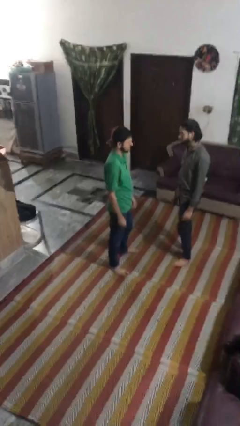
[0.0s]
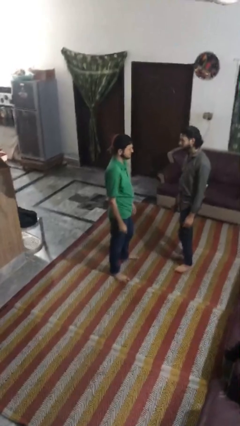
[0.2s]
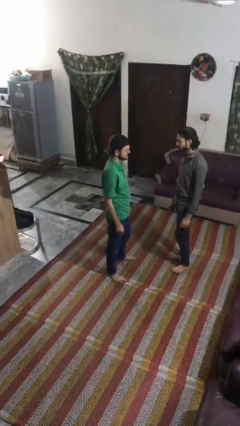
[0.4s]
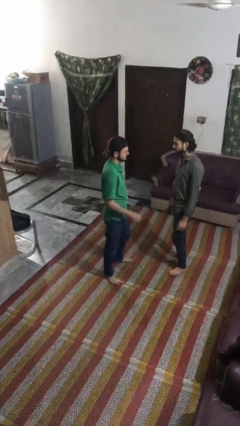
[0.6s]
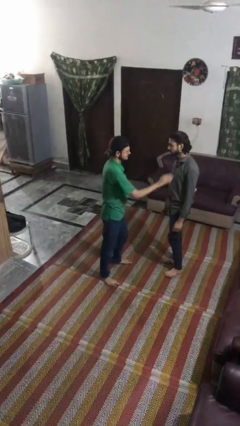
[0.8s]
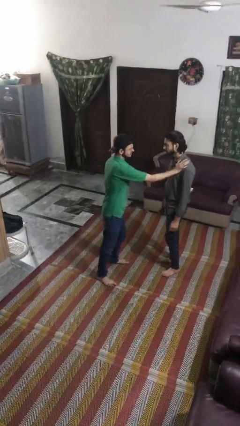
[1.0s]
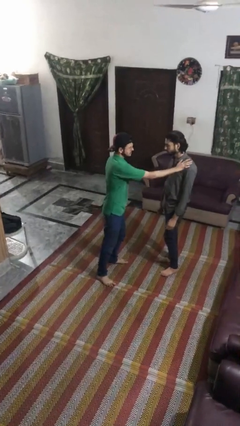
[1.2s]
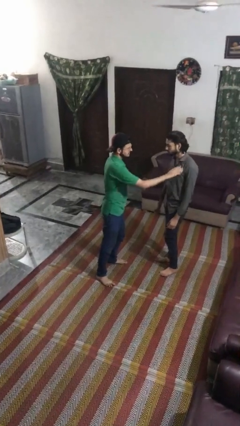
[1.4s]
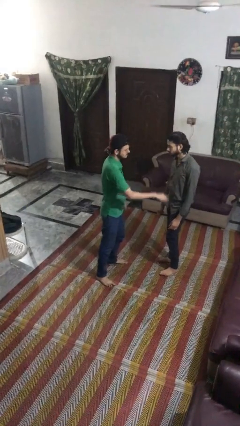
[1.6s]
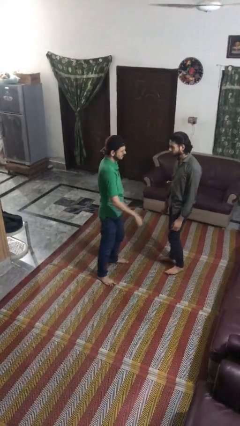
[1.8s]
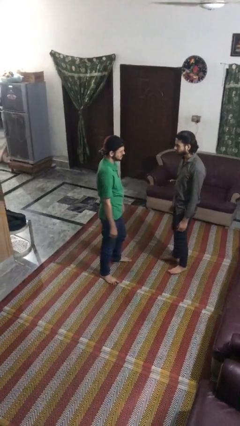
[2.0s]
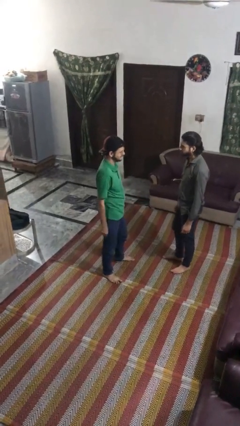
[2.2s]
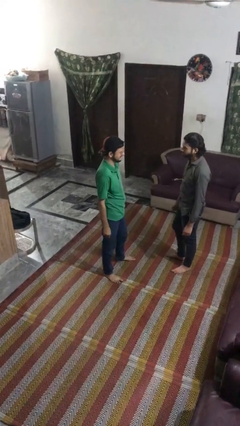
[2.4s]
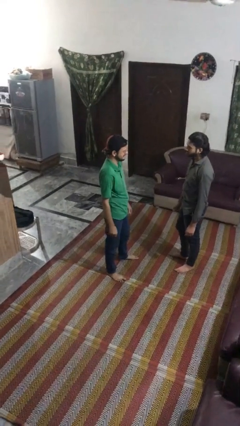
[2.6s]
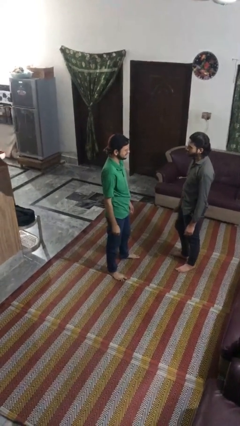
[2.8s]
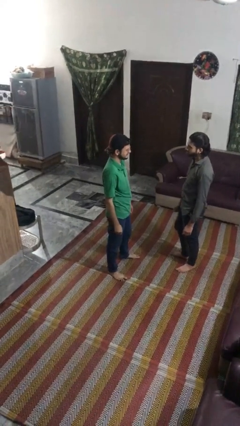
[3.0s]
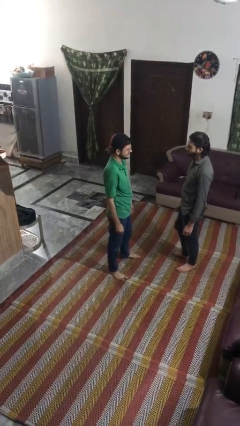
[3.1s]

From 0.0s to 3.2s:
person shoves person

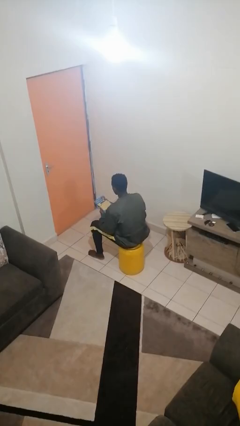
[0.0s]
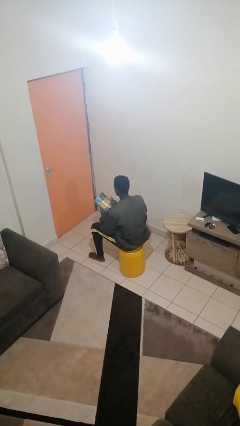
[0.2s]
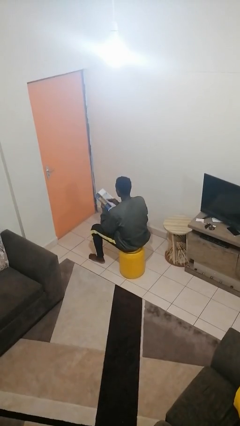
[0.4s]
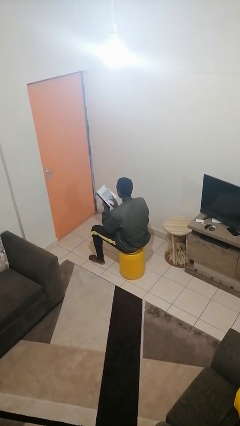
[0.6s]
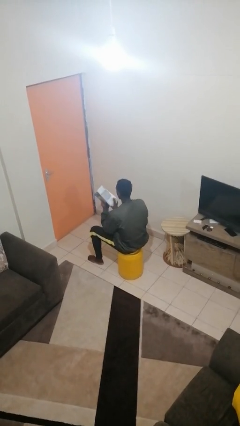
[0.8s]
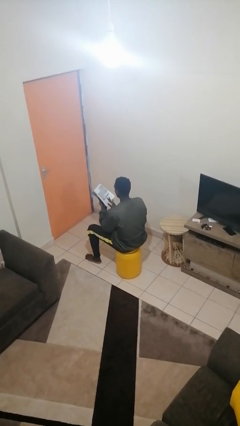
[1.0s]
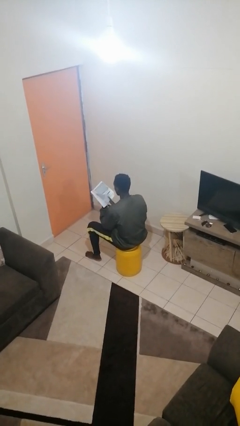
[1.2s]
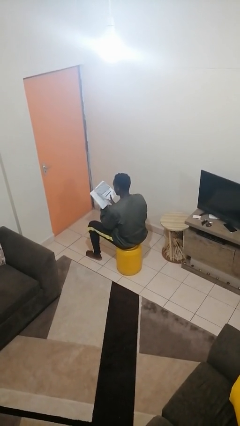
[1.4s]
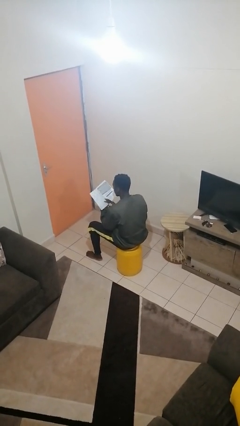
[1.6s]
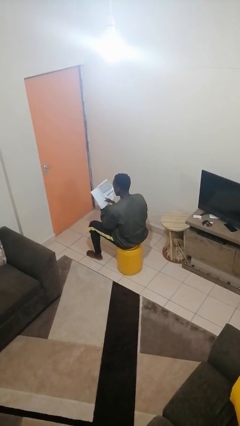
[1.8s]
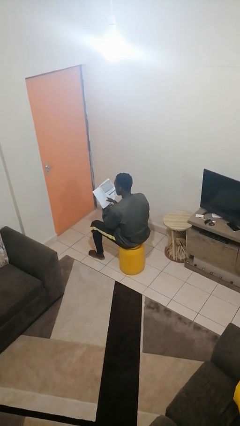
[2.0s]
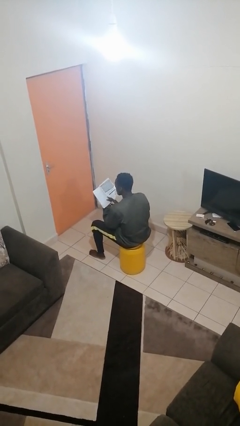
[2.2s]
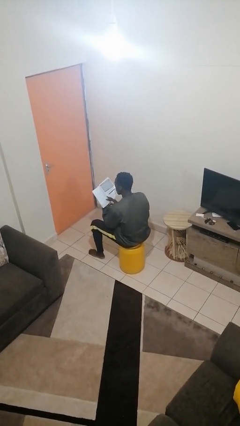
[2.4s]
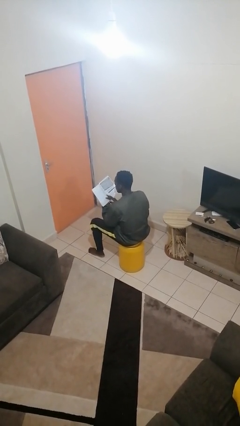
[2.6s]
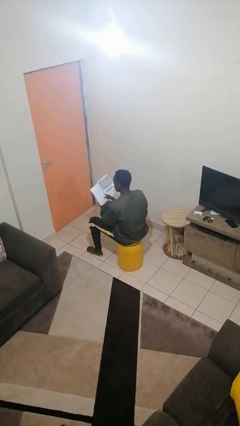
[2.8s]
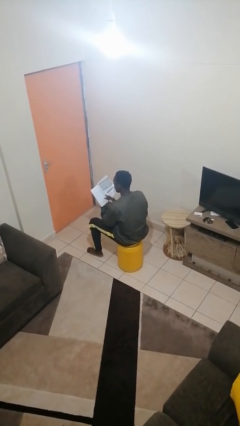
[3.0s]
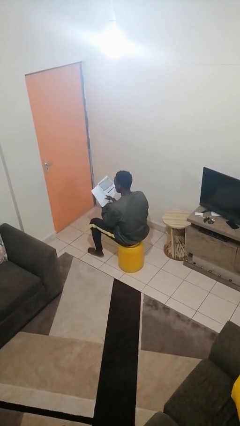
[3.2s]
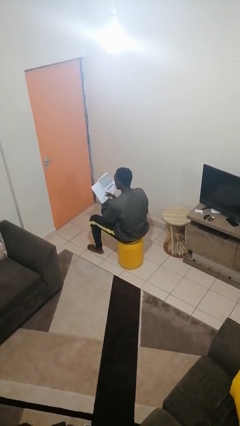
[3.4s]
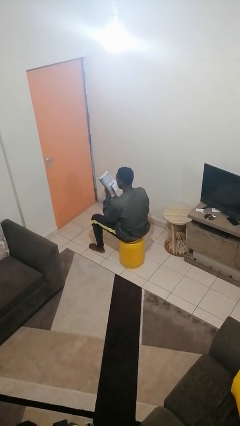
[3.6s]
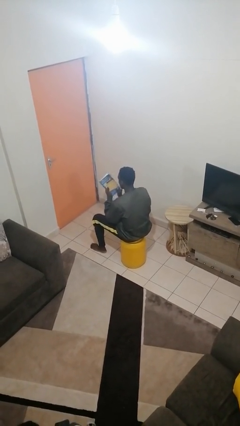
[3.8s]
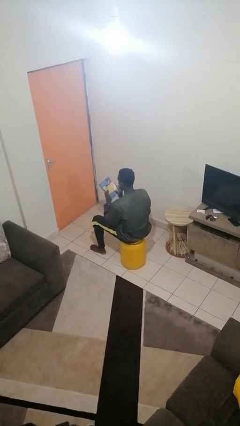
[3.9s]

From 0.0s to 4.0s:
person reads book

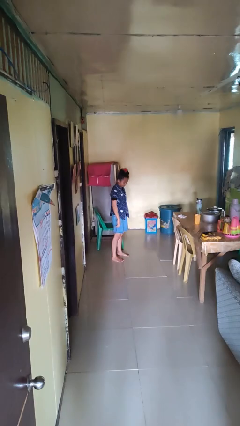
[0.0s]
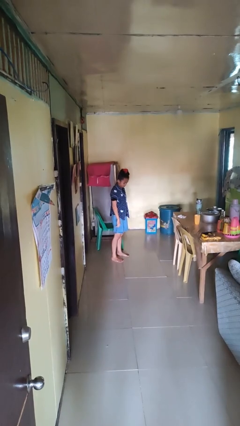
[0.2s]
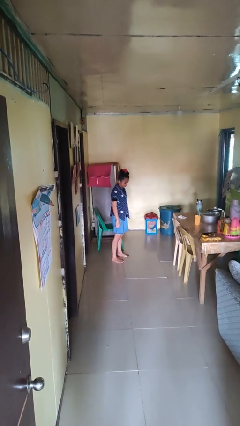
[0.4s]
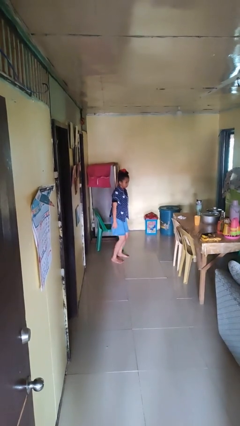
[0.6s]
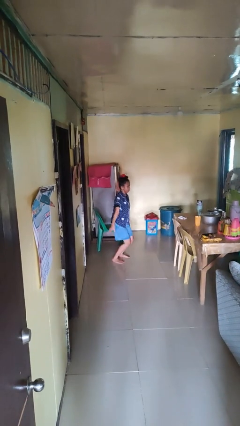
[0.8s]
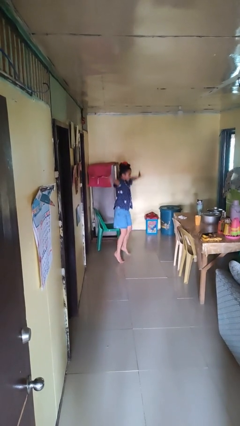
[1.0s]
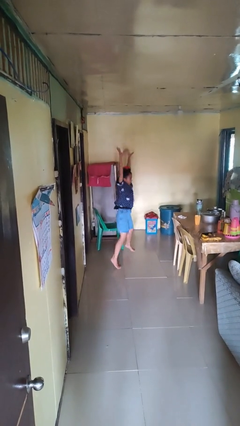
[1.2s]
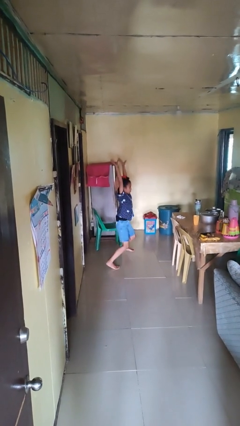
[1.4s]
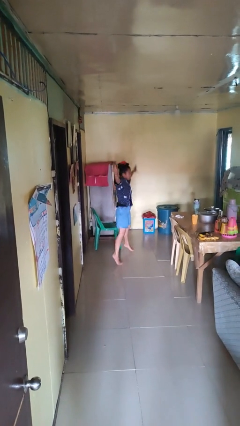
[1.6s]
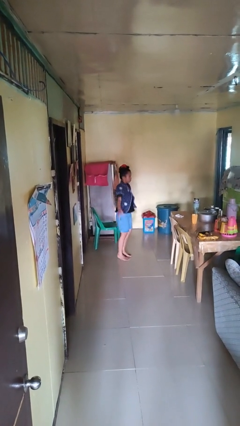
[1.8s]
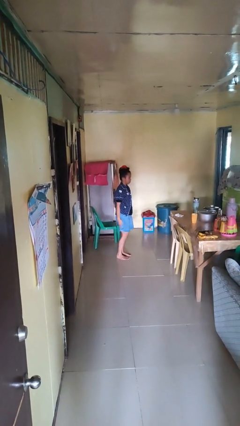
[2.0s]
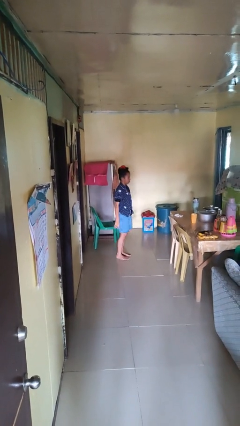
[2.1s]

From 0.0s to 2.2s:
person exercises with jumping jacks

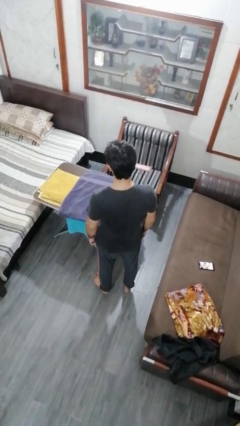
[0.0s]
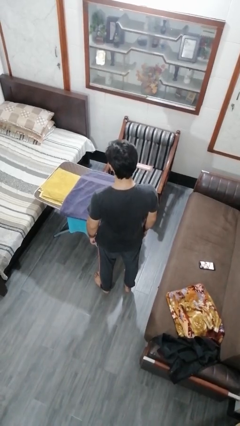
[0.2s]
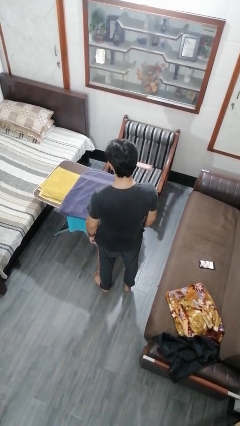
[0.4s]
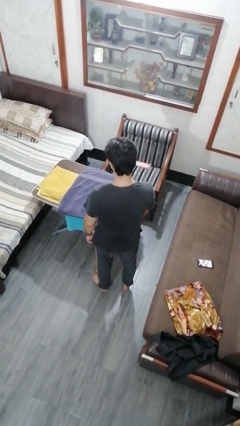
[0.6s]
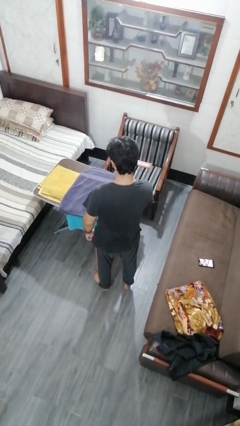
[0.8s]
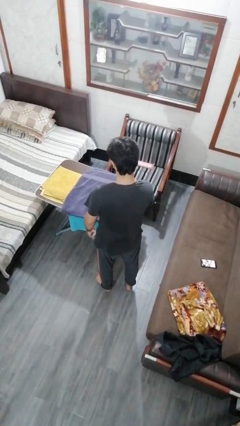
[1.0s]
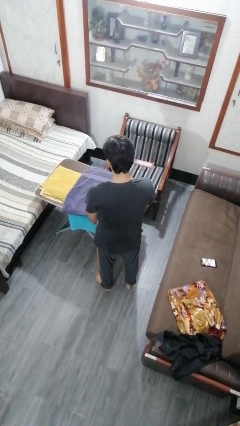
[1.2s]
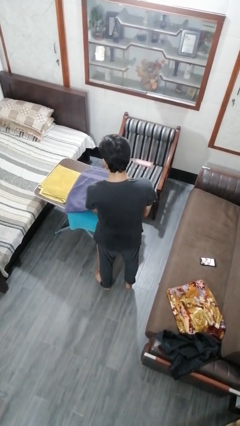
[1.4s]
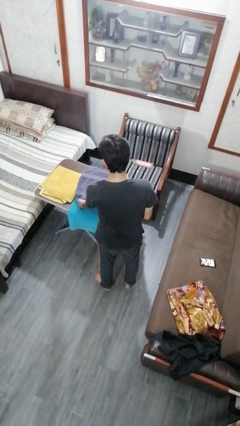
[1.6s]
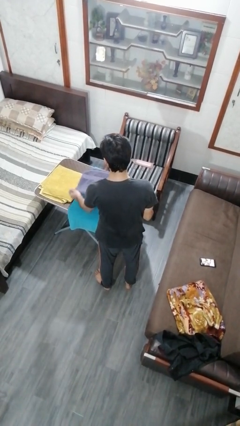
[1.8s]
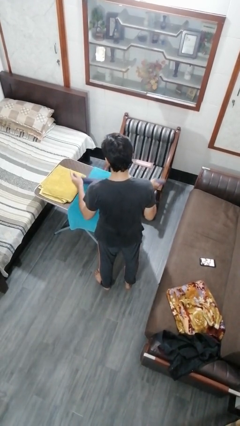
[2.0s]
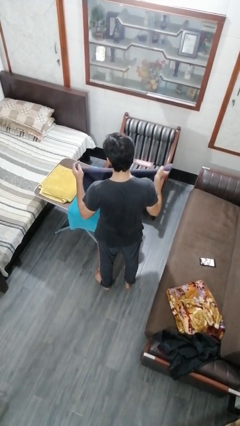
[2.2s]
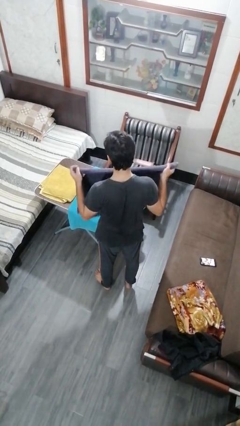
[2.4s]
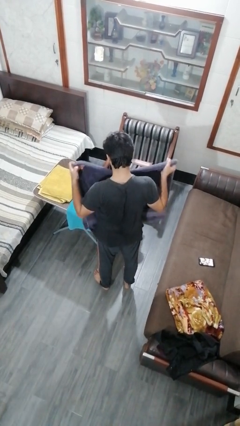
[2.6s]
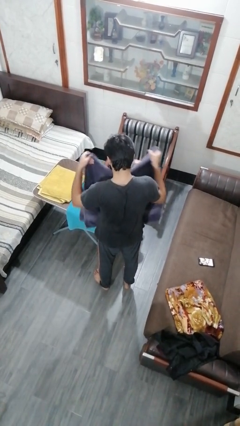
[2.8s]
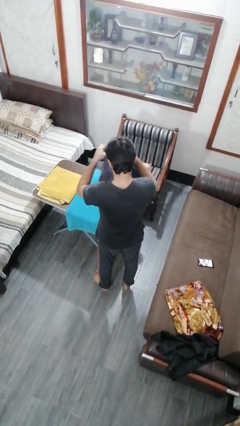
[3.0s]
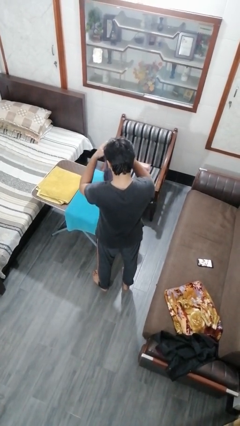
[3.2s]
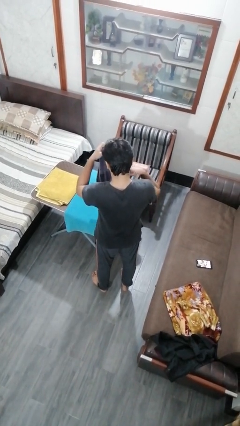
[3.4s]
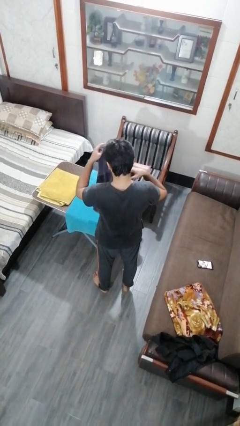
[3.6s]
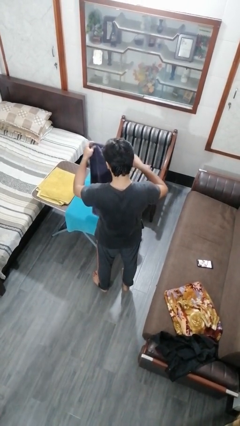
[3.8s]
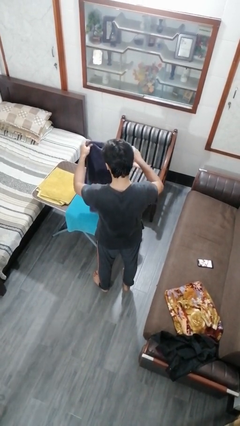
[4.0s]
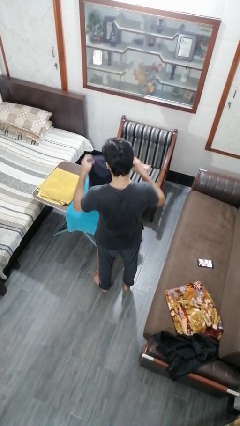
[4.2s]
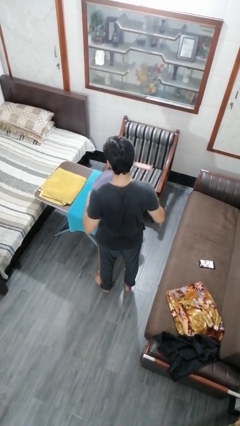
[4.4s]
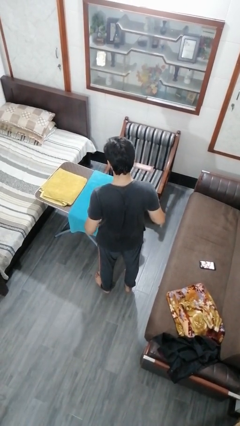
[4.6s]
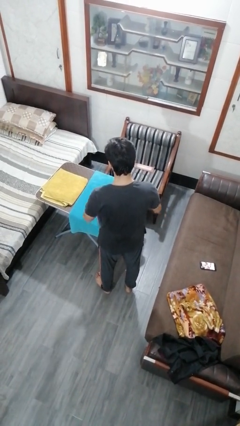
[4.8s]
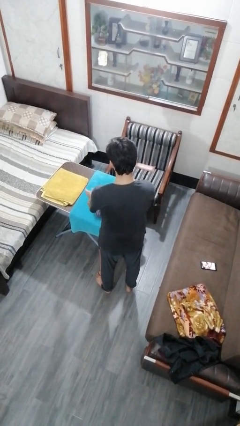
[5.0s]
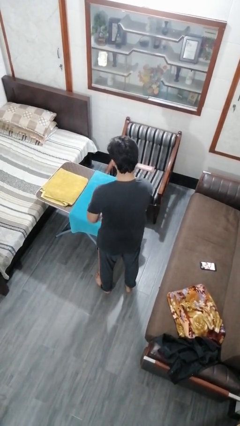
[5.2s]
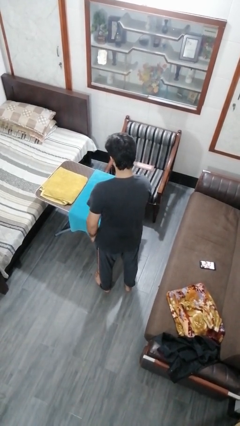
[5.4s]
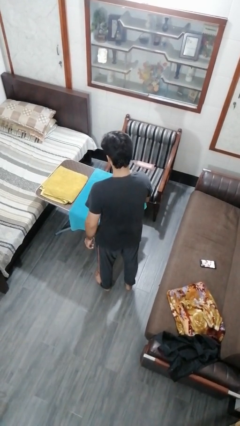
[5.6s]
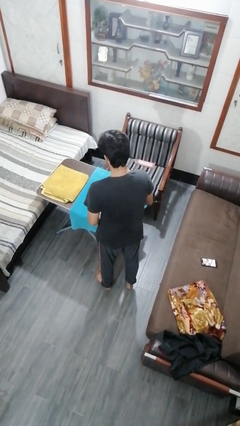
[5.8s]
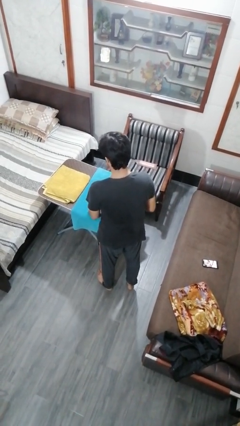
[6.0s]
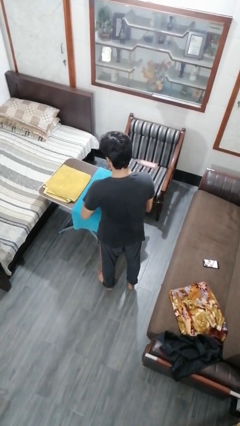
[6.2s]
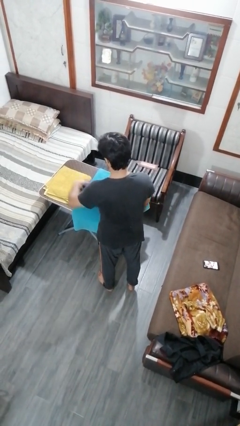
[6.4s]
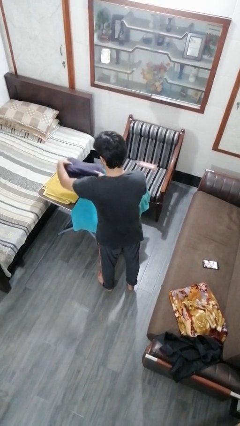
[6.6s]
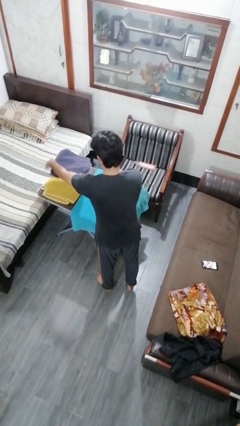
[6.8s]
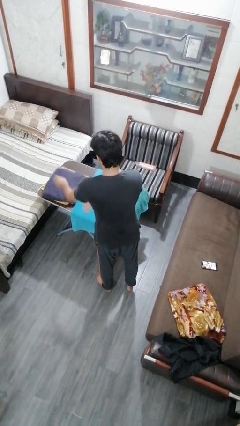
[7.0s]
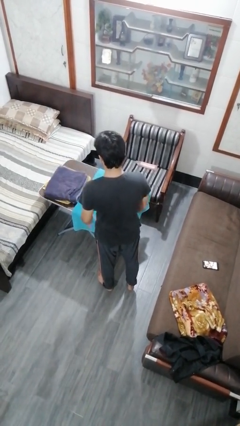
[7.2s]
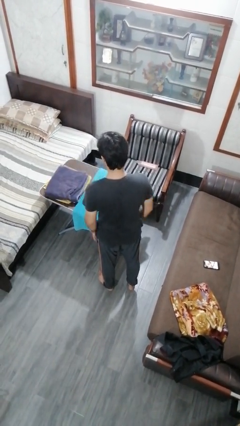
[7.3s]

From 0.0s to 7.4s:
person folds towel

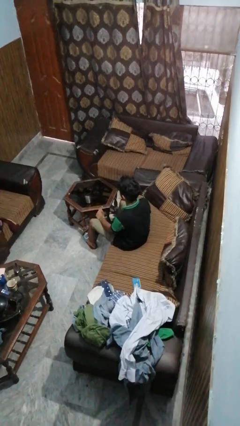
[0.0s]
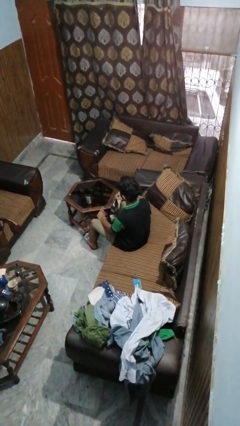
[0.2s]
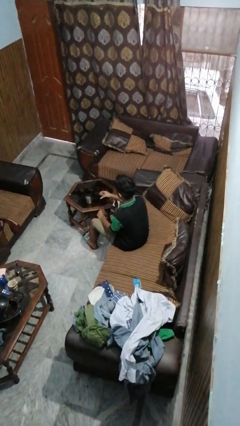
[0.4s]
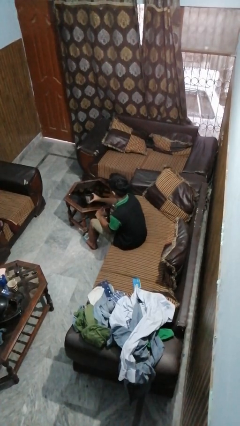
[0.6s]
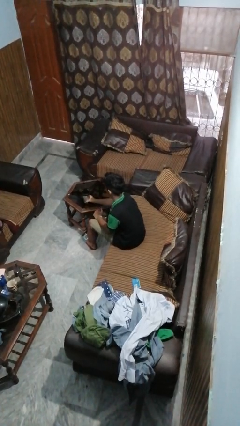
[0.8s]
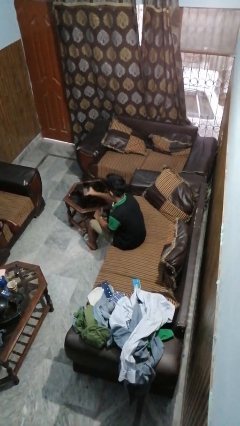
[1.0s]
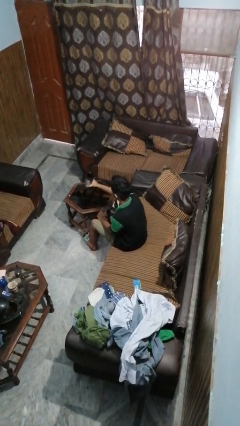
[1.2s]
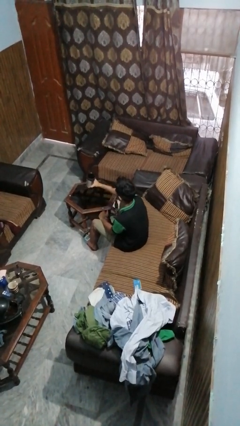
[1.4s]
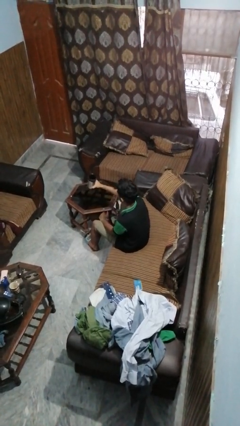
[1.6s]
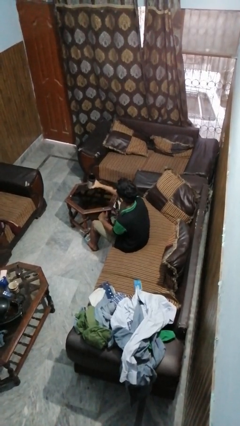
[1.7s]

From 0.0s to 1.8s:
person picks up object from table
